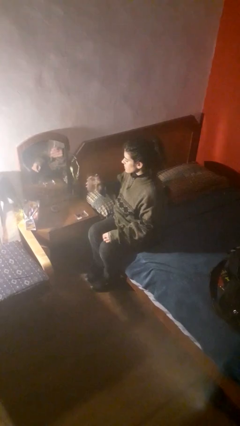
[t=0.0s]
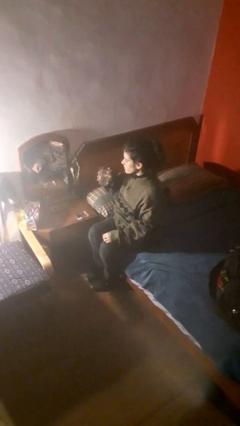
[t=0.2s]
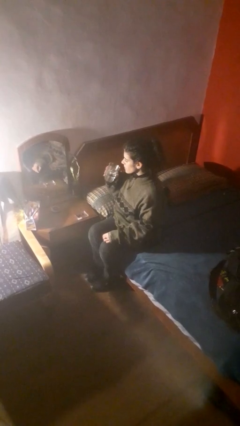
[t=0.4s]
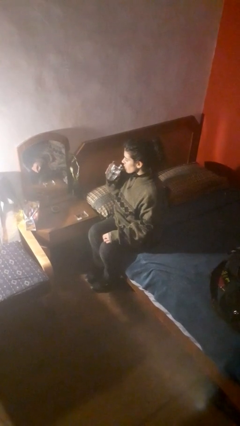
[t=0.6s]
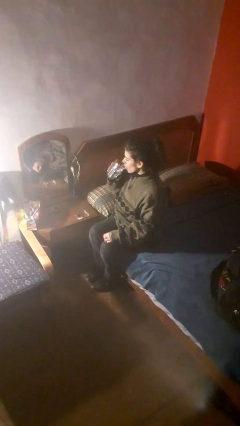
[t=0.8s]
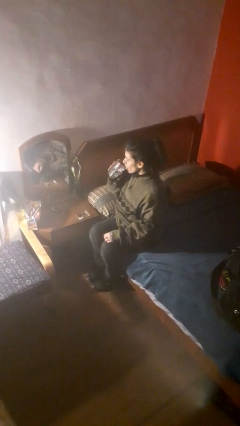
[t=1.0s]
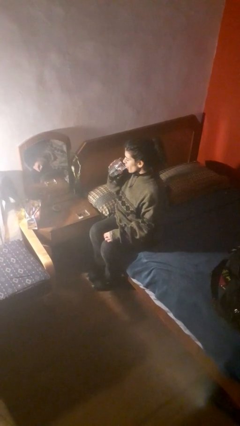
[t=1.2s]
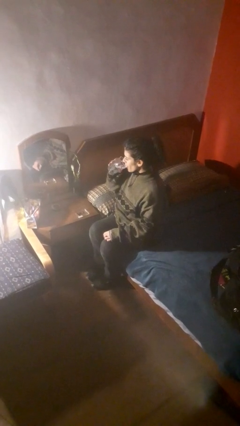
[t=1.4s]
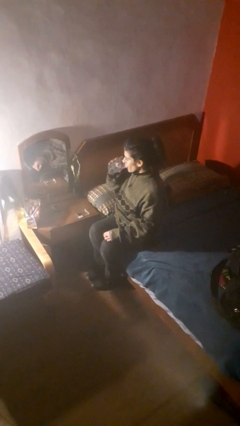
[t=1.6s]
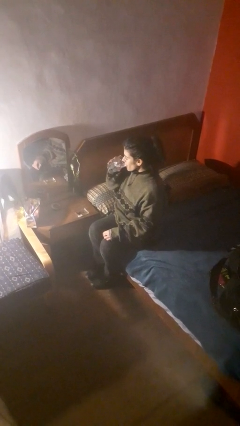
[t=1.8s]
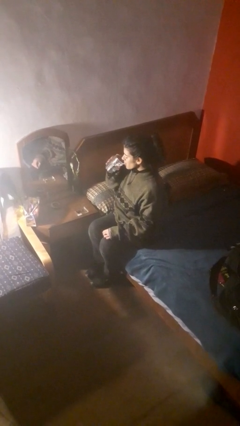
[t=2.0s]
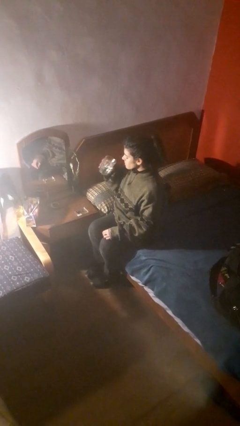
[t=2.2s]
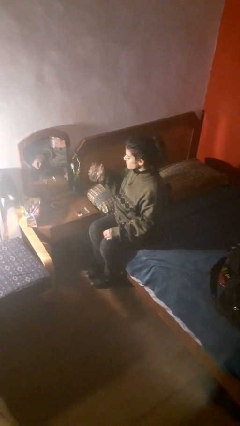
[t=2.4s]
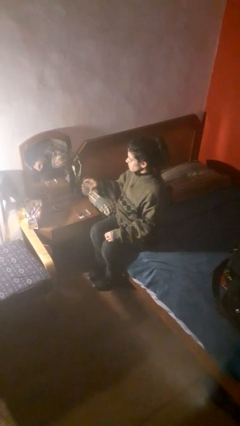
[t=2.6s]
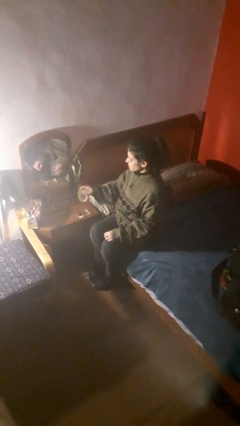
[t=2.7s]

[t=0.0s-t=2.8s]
person drinks from cup

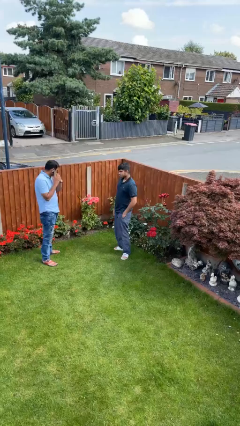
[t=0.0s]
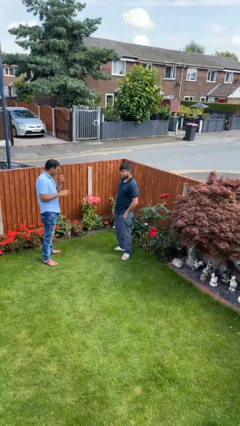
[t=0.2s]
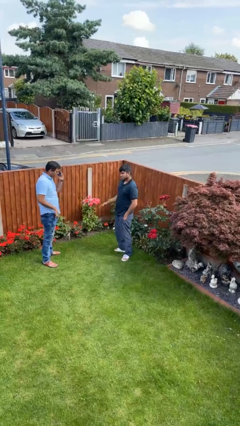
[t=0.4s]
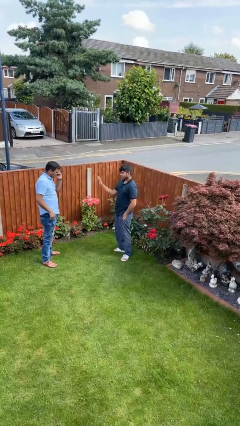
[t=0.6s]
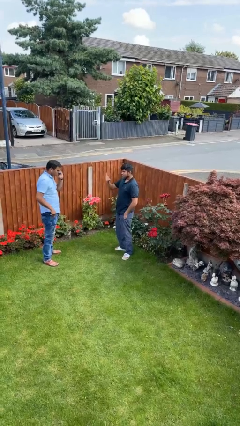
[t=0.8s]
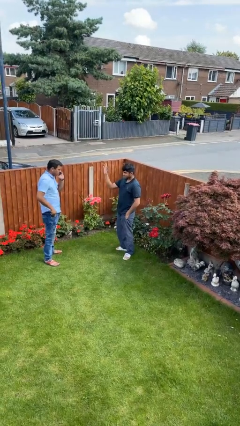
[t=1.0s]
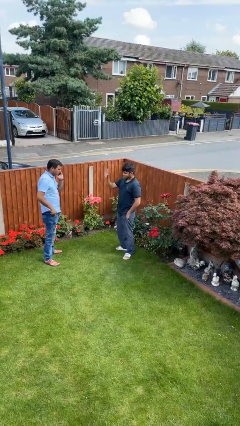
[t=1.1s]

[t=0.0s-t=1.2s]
person waves at person

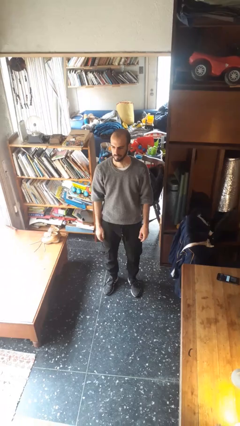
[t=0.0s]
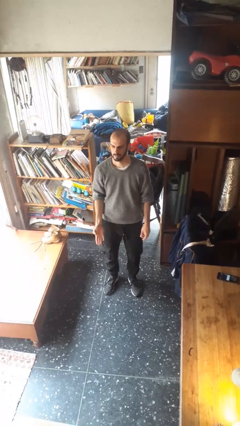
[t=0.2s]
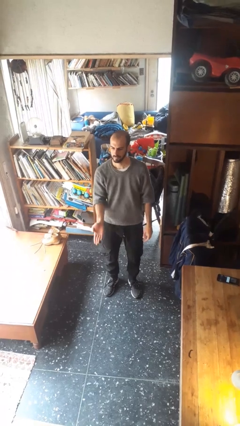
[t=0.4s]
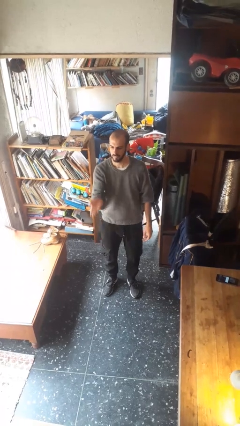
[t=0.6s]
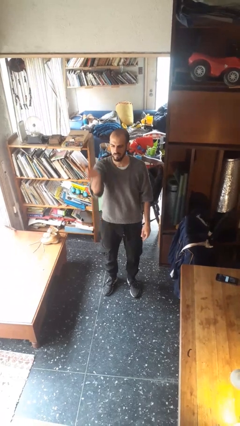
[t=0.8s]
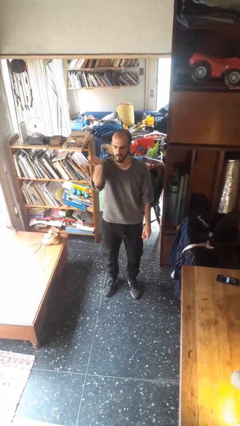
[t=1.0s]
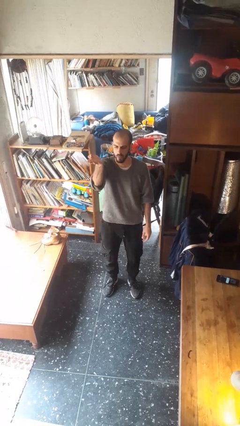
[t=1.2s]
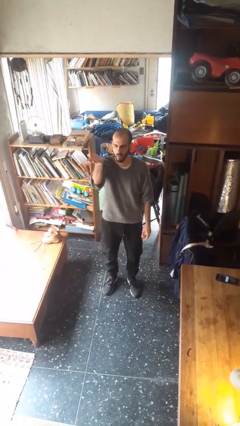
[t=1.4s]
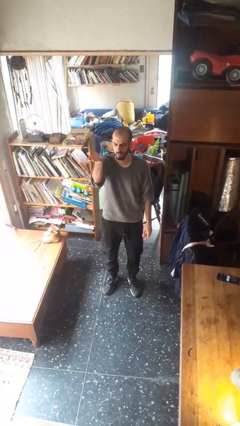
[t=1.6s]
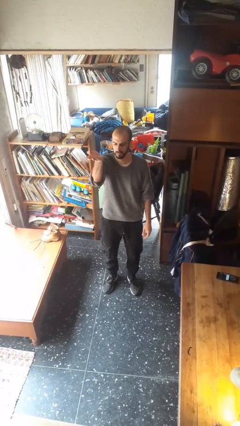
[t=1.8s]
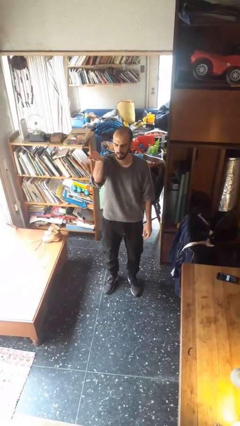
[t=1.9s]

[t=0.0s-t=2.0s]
person gestures swipe up

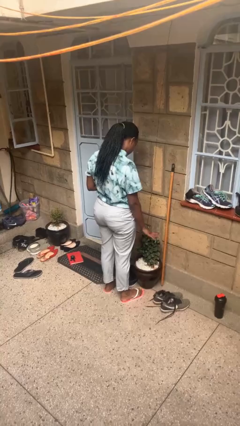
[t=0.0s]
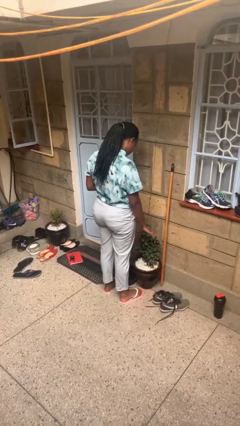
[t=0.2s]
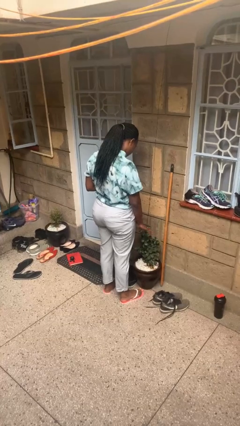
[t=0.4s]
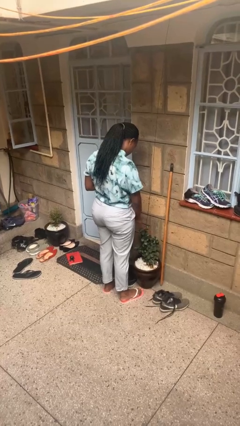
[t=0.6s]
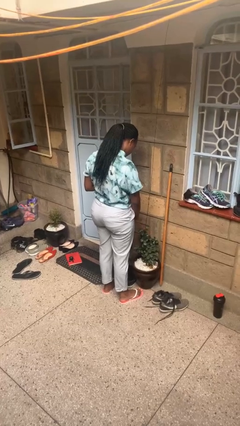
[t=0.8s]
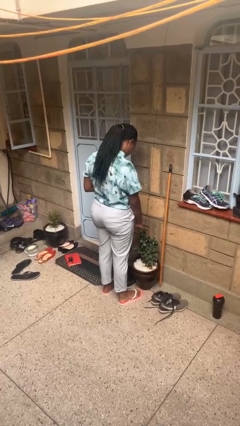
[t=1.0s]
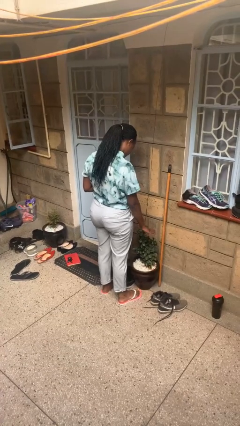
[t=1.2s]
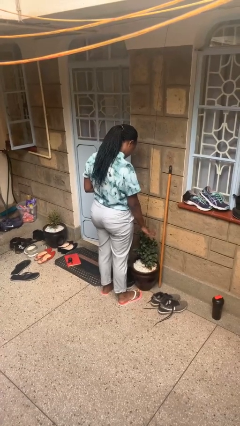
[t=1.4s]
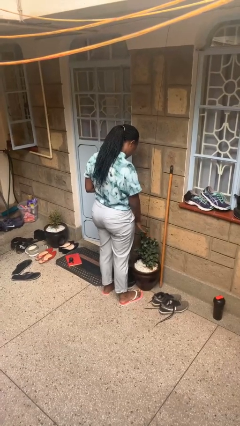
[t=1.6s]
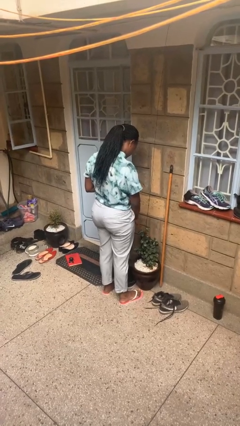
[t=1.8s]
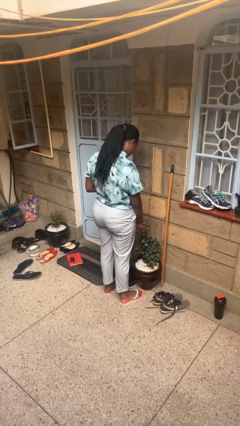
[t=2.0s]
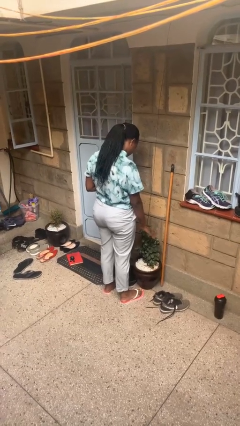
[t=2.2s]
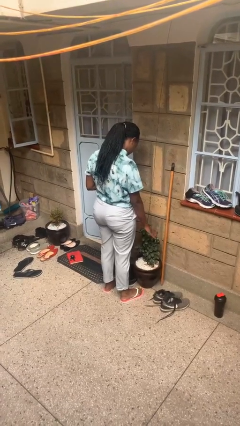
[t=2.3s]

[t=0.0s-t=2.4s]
person waves hand over object

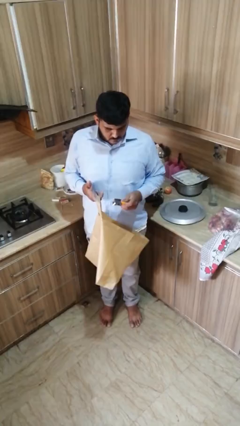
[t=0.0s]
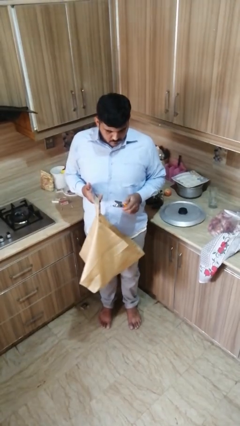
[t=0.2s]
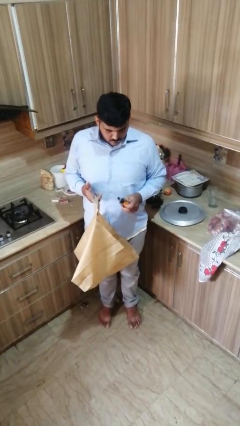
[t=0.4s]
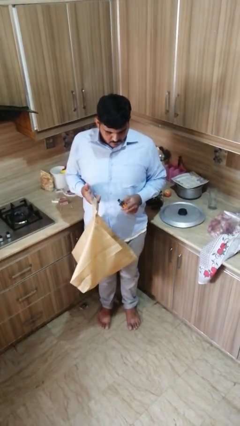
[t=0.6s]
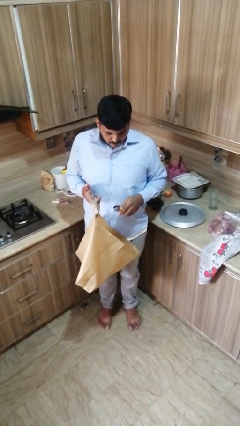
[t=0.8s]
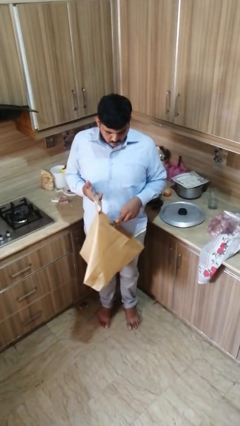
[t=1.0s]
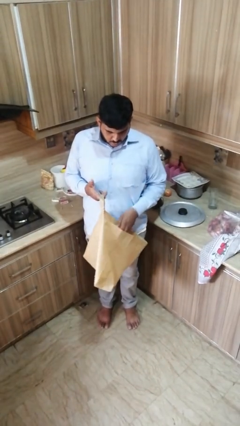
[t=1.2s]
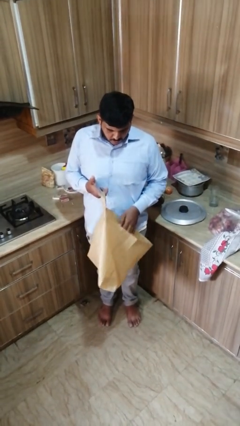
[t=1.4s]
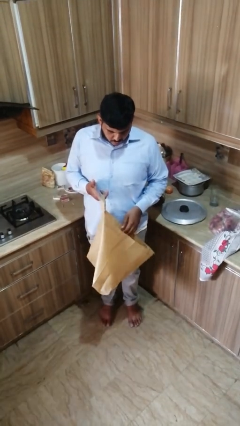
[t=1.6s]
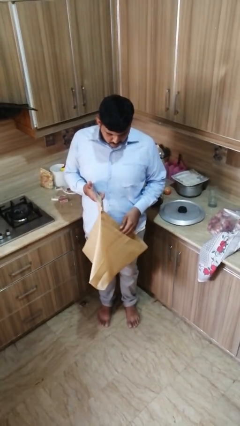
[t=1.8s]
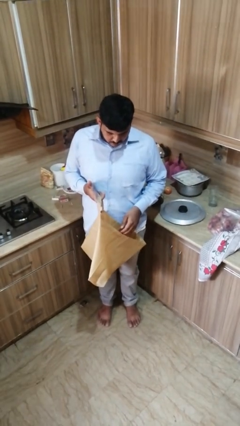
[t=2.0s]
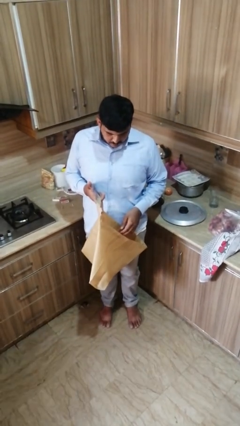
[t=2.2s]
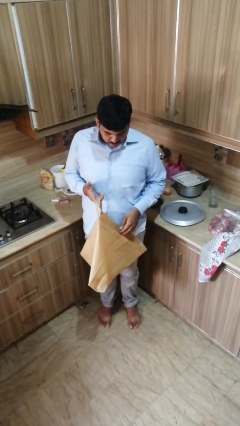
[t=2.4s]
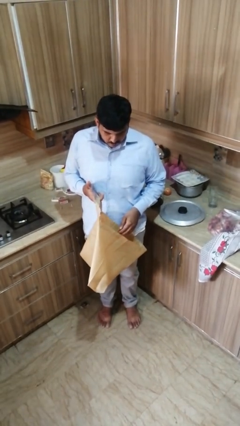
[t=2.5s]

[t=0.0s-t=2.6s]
person puts object into bag

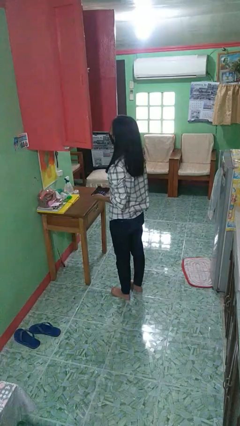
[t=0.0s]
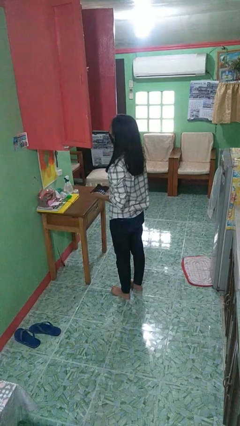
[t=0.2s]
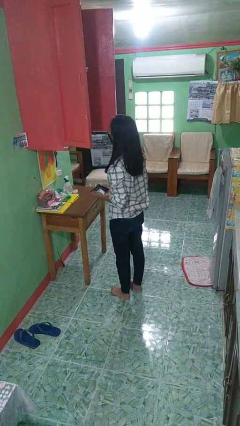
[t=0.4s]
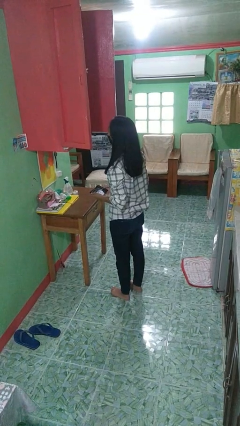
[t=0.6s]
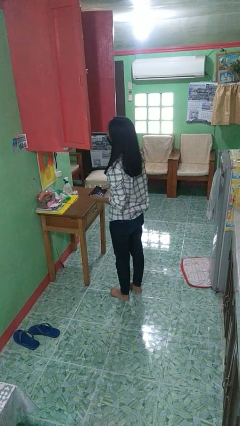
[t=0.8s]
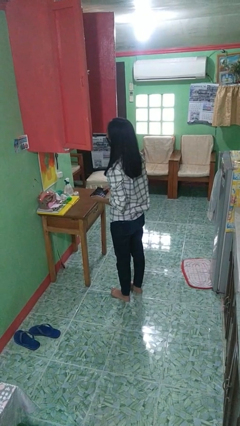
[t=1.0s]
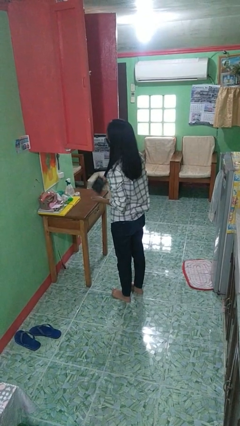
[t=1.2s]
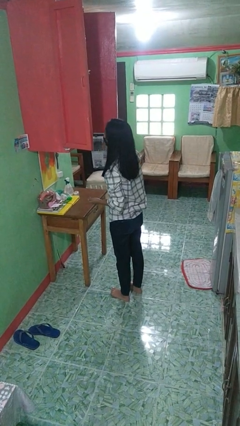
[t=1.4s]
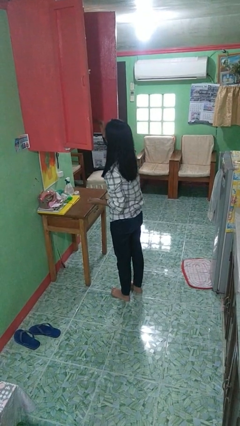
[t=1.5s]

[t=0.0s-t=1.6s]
person puts down object into cabinet

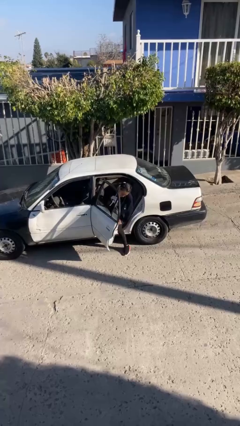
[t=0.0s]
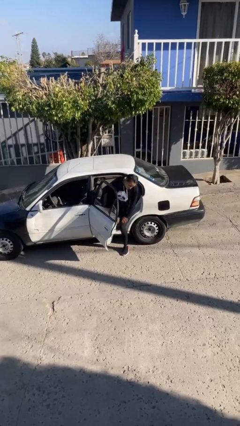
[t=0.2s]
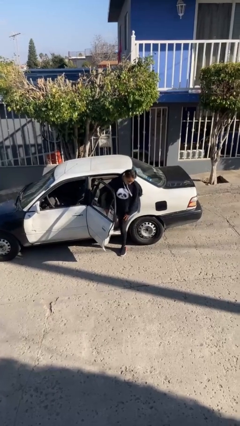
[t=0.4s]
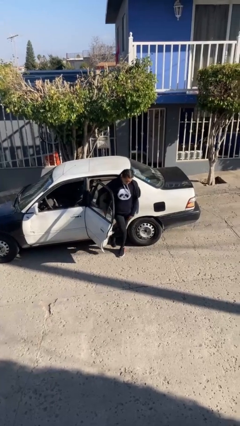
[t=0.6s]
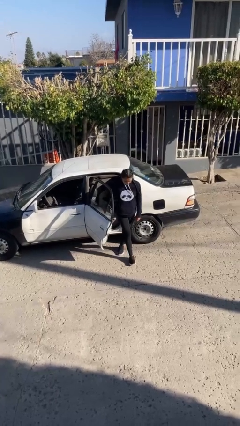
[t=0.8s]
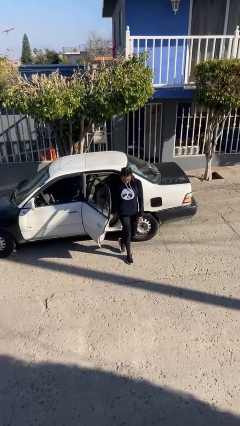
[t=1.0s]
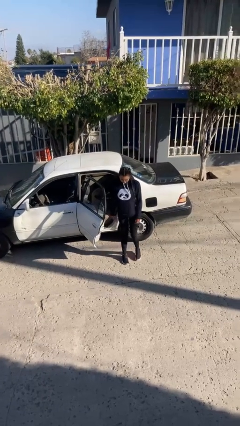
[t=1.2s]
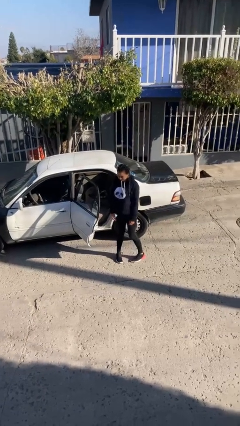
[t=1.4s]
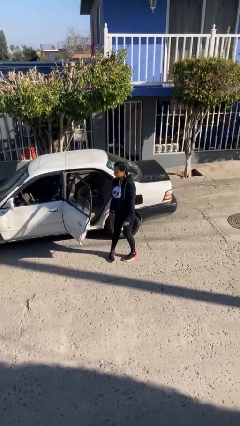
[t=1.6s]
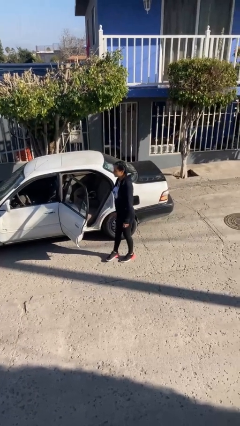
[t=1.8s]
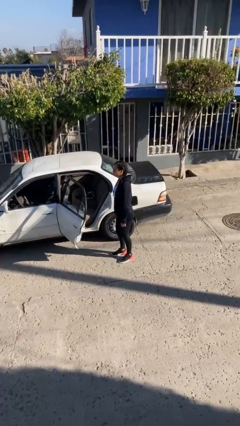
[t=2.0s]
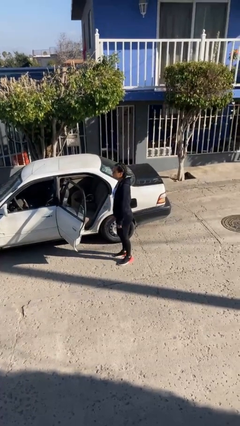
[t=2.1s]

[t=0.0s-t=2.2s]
person exits car

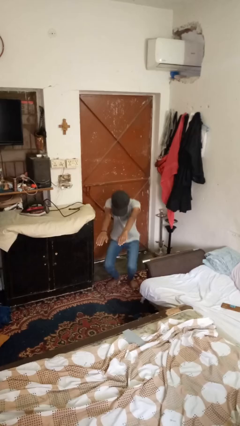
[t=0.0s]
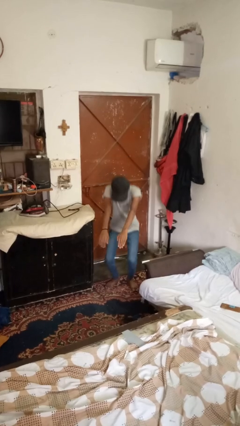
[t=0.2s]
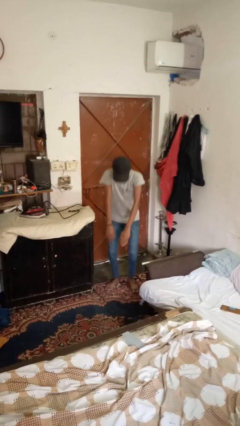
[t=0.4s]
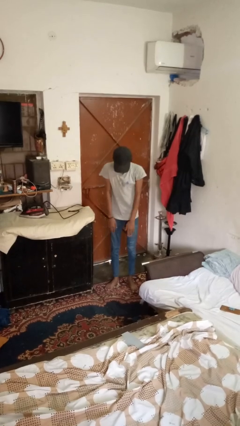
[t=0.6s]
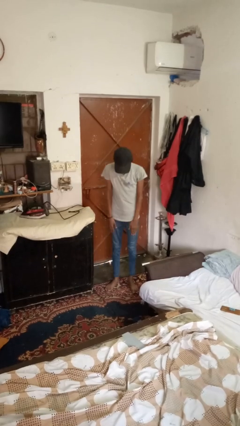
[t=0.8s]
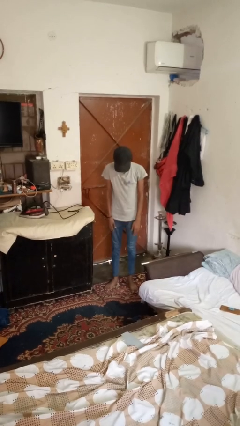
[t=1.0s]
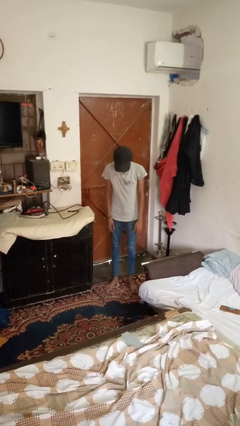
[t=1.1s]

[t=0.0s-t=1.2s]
person stands up

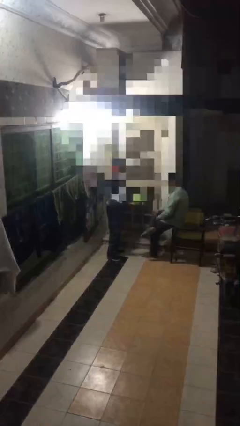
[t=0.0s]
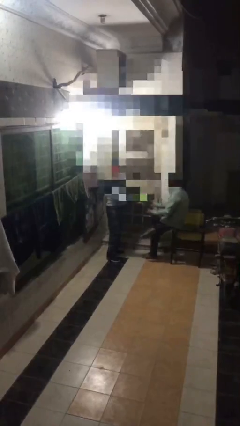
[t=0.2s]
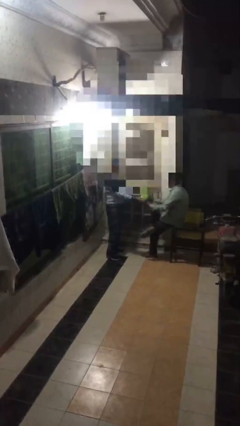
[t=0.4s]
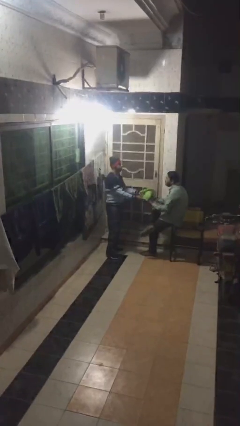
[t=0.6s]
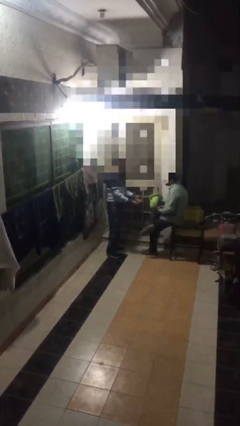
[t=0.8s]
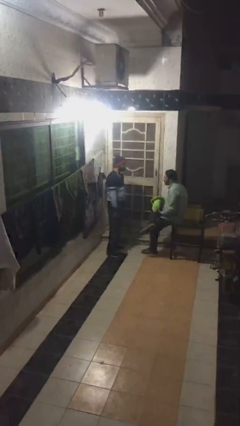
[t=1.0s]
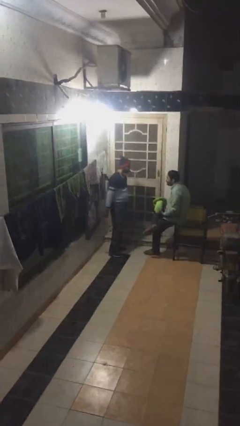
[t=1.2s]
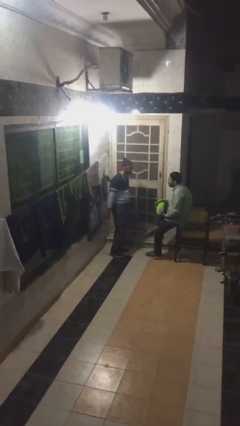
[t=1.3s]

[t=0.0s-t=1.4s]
person transfers object to person
